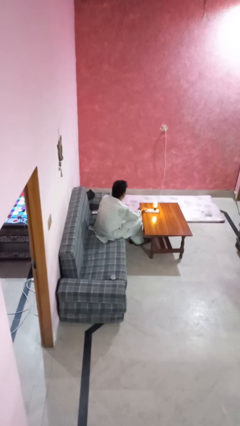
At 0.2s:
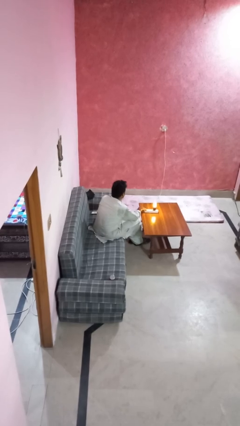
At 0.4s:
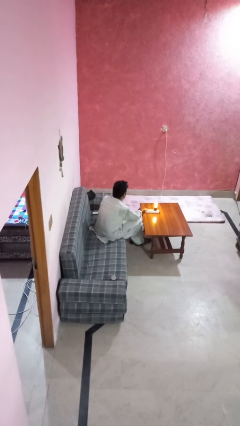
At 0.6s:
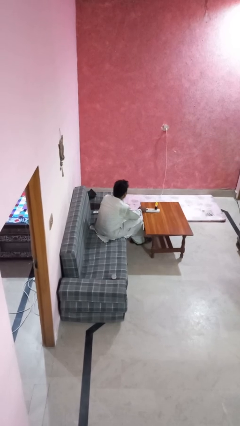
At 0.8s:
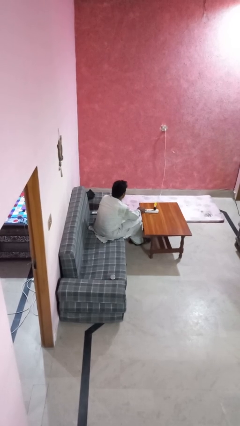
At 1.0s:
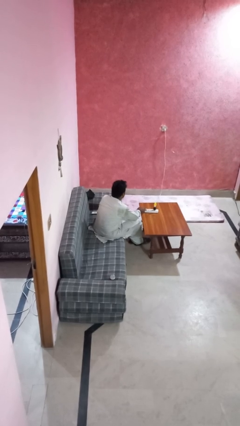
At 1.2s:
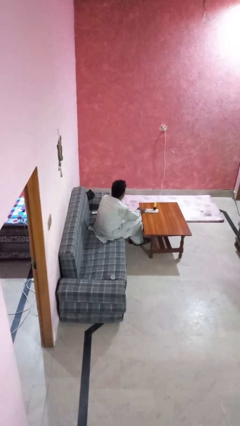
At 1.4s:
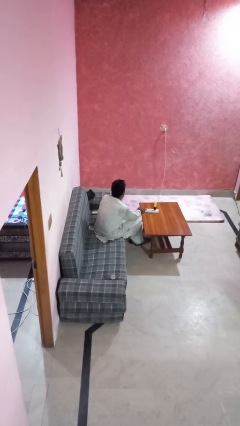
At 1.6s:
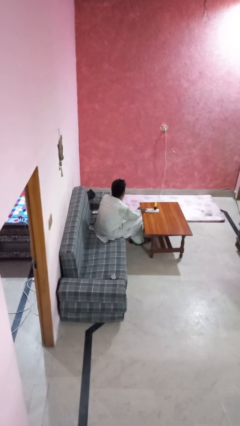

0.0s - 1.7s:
person turns off lamp

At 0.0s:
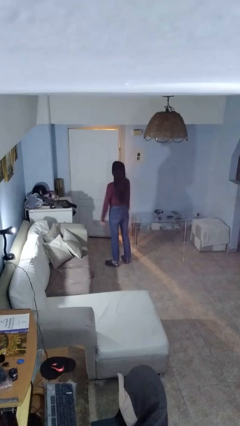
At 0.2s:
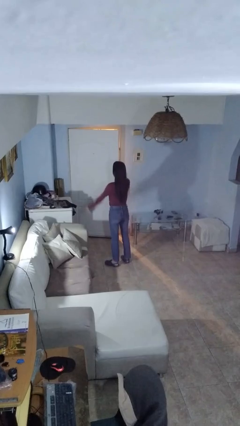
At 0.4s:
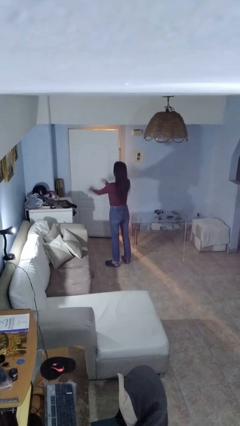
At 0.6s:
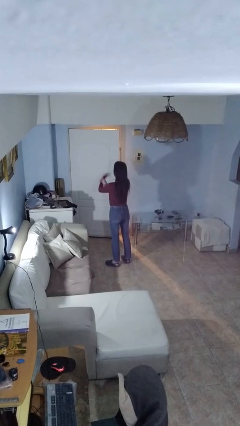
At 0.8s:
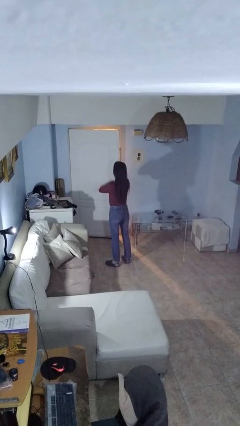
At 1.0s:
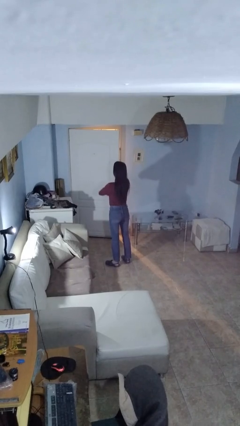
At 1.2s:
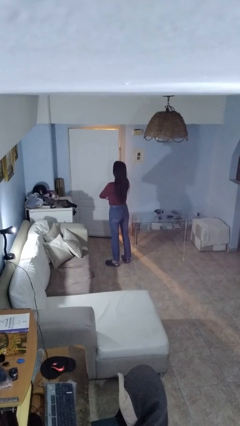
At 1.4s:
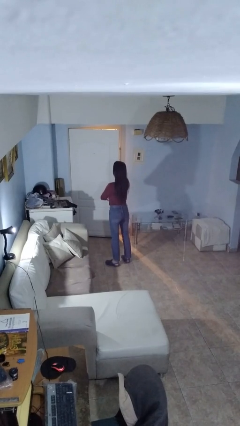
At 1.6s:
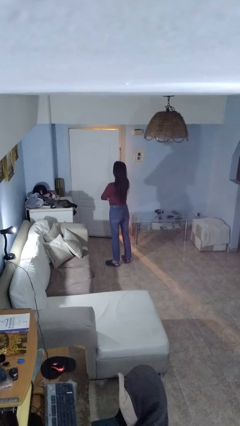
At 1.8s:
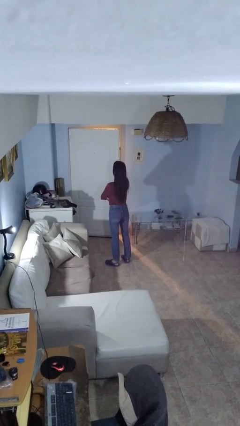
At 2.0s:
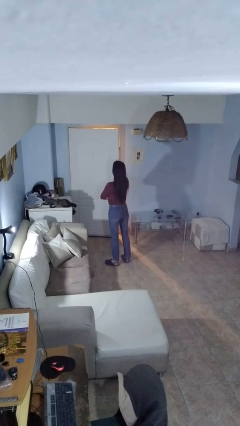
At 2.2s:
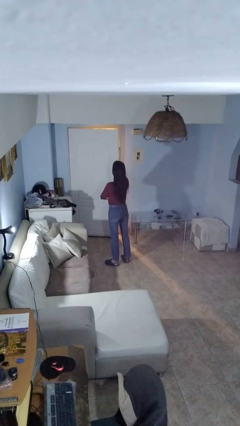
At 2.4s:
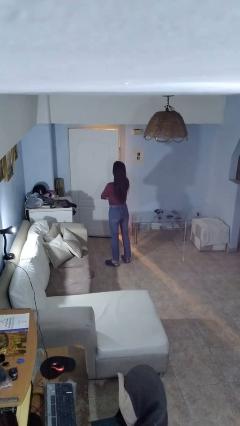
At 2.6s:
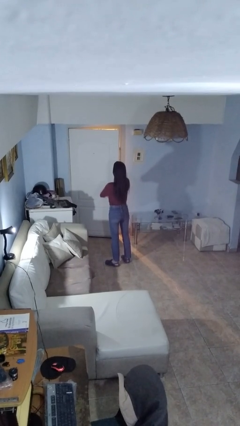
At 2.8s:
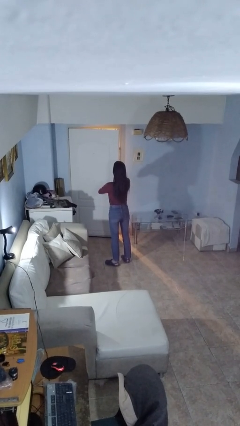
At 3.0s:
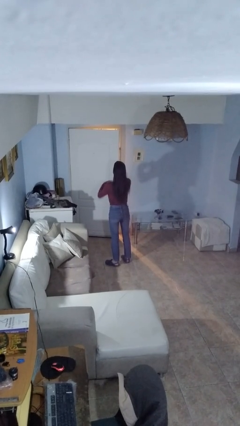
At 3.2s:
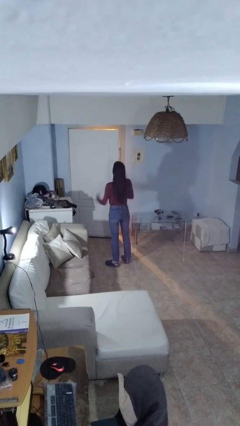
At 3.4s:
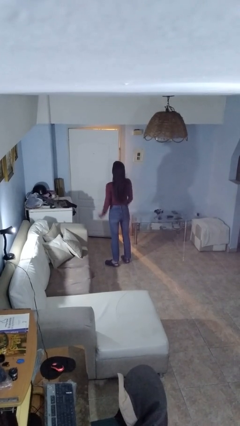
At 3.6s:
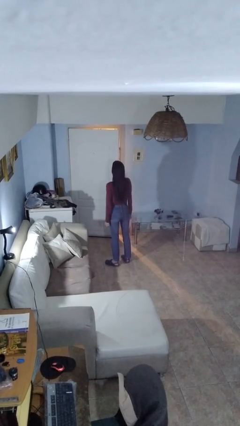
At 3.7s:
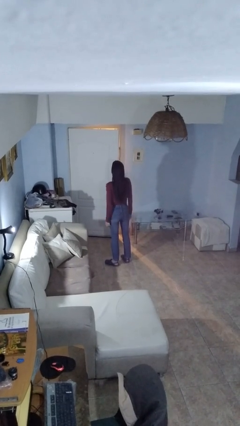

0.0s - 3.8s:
person crosses arms

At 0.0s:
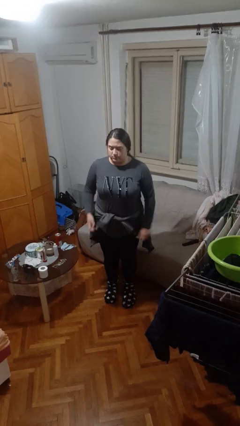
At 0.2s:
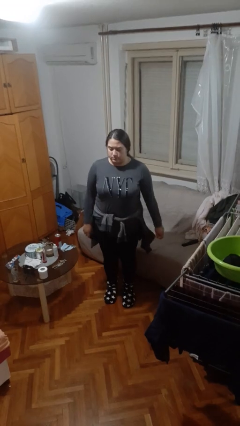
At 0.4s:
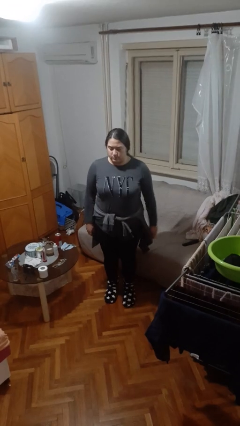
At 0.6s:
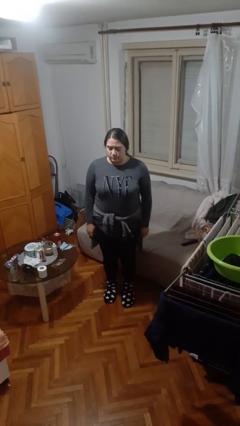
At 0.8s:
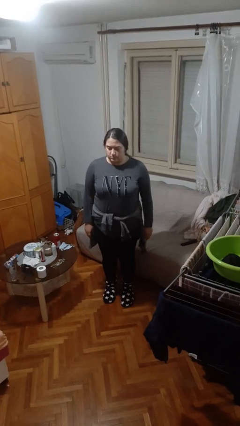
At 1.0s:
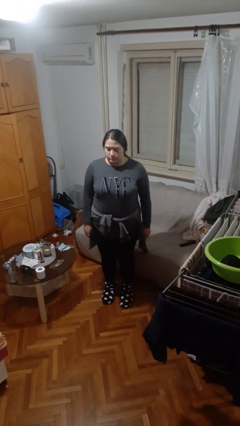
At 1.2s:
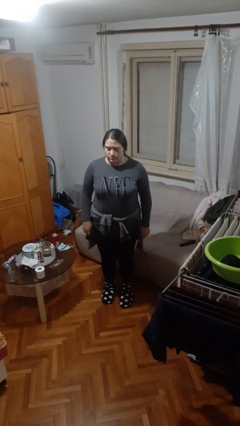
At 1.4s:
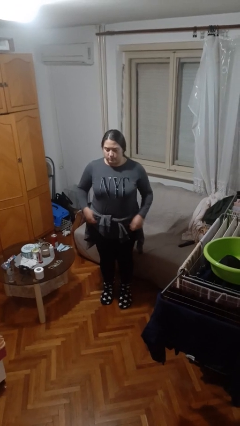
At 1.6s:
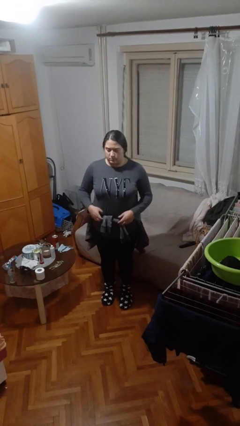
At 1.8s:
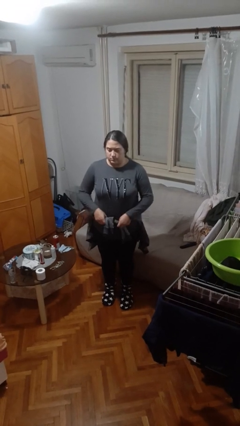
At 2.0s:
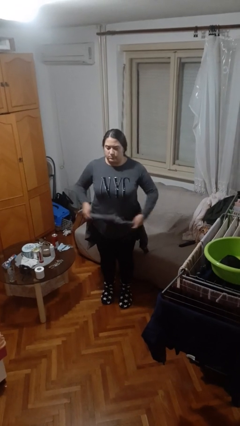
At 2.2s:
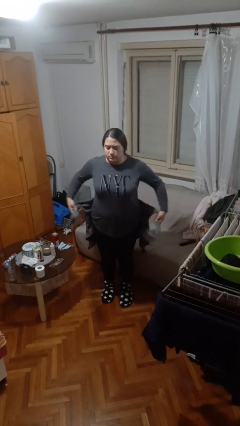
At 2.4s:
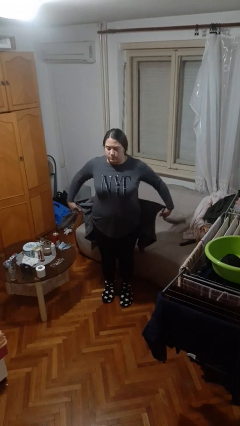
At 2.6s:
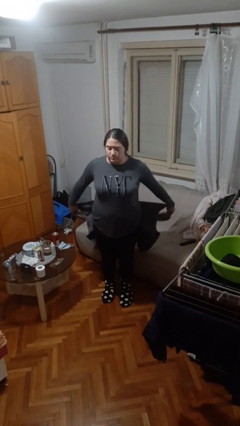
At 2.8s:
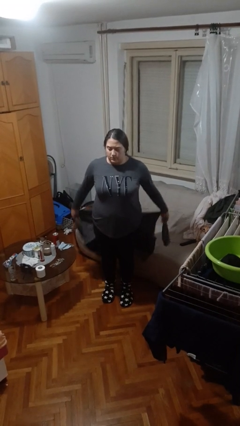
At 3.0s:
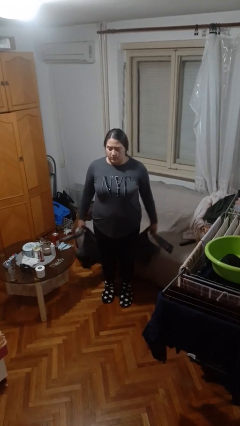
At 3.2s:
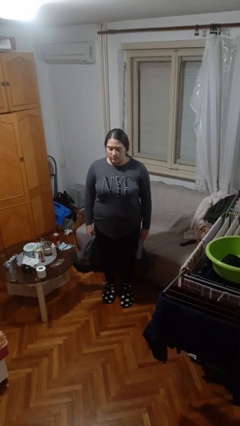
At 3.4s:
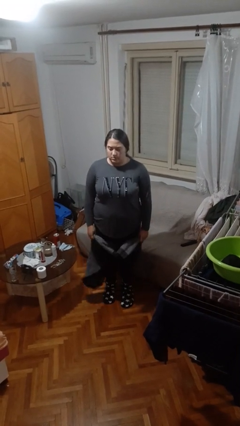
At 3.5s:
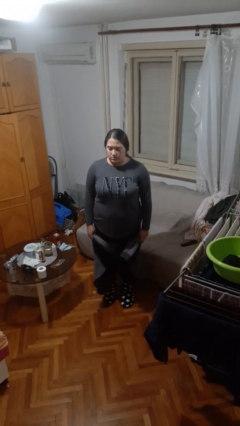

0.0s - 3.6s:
person unties jacket around waist

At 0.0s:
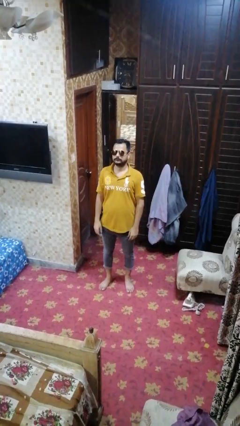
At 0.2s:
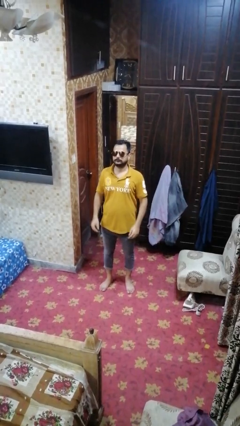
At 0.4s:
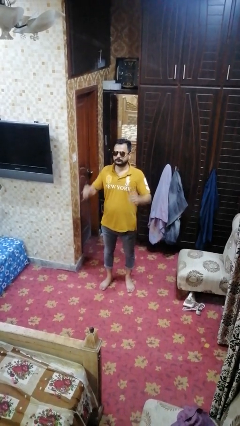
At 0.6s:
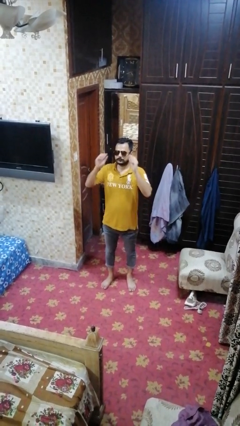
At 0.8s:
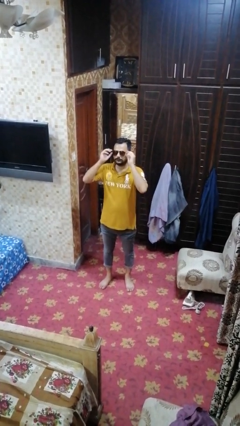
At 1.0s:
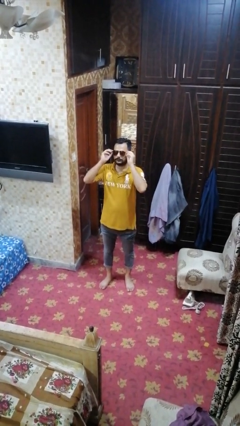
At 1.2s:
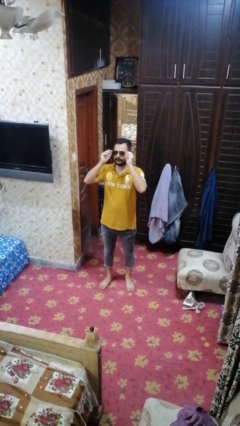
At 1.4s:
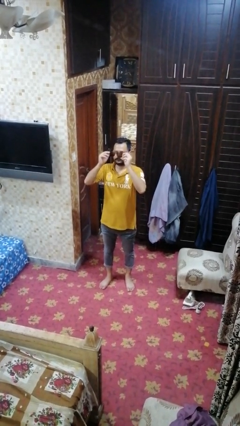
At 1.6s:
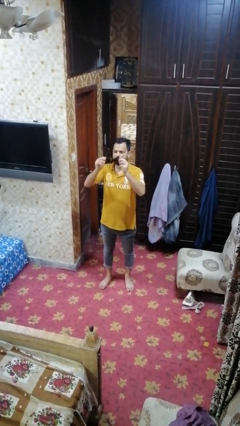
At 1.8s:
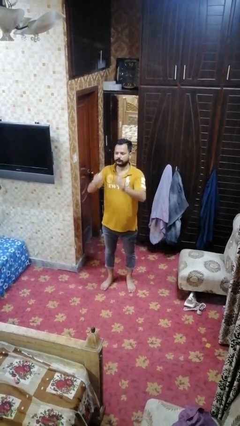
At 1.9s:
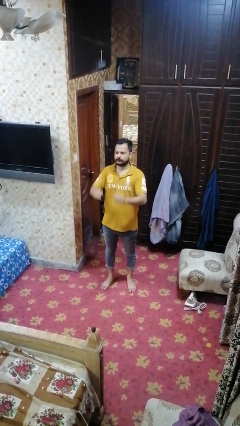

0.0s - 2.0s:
person takes off sunglasses

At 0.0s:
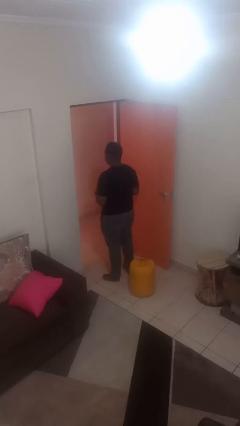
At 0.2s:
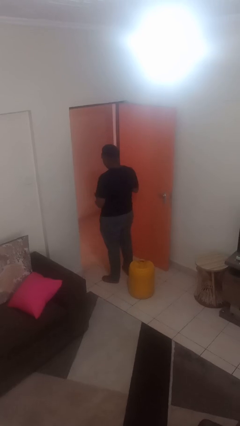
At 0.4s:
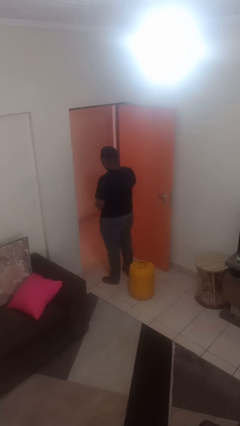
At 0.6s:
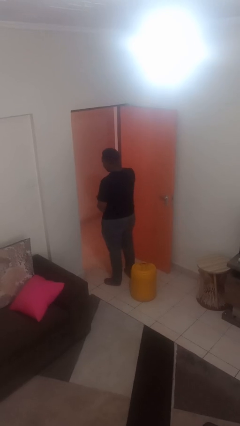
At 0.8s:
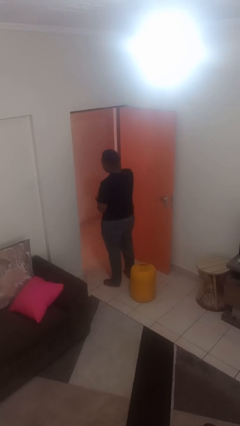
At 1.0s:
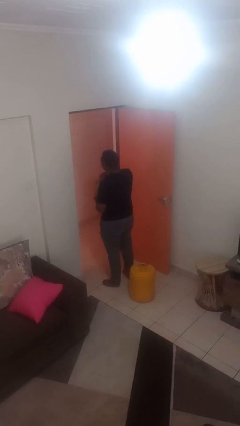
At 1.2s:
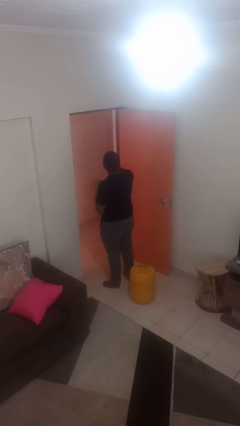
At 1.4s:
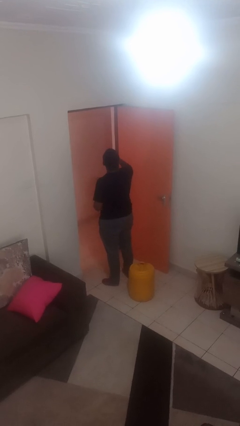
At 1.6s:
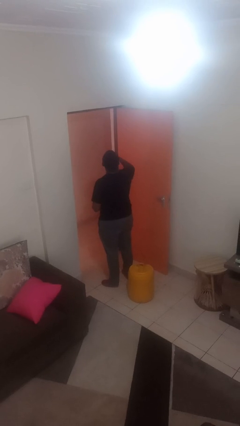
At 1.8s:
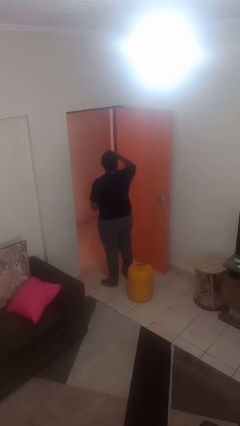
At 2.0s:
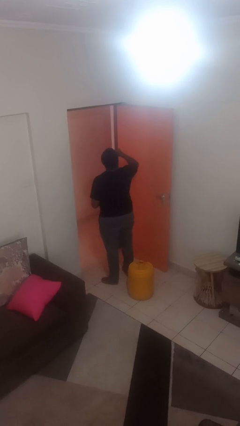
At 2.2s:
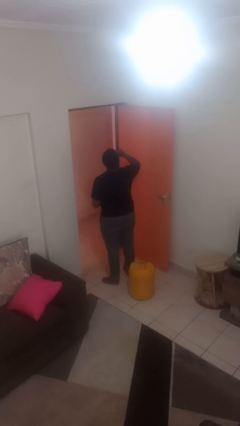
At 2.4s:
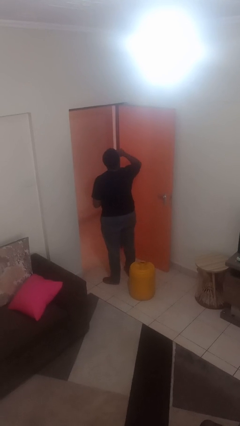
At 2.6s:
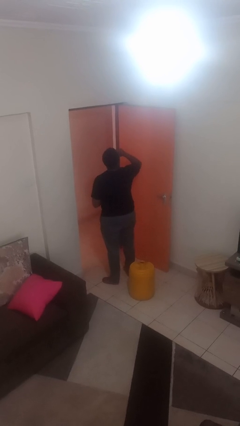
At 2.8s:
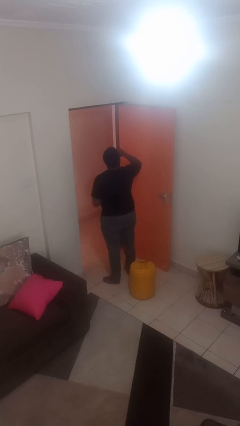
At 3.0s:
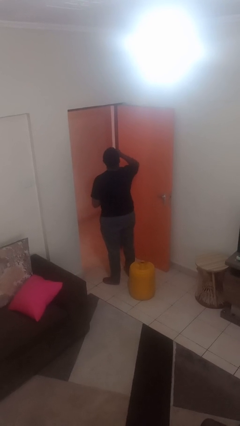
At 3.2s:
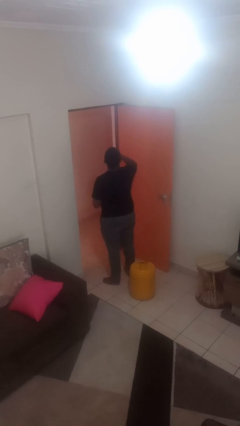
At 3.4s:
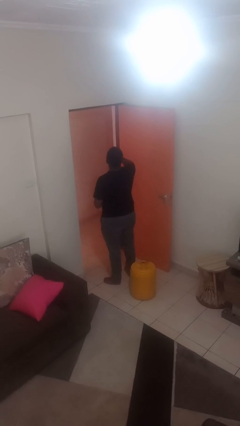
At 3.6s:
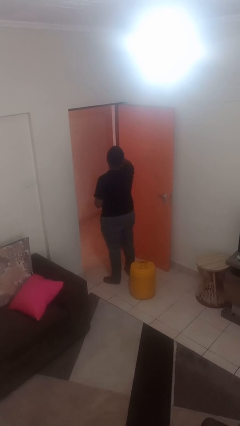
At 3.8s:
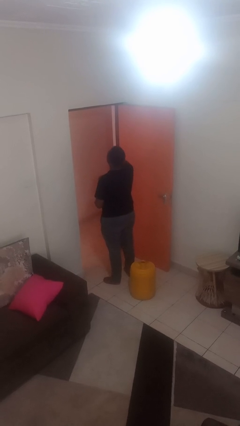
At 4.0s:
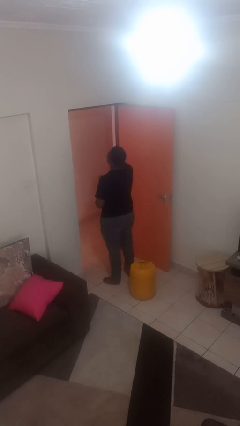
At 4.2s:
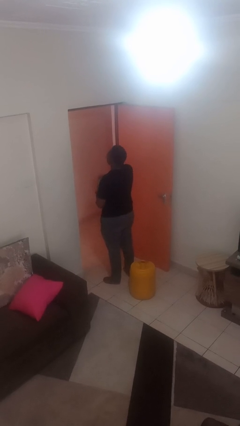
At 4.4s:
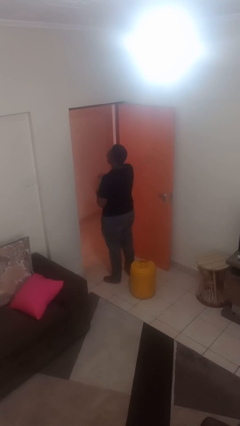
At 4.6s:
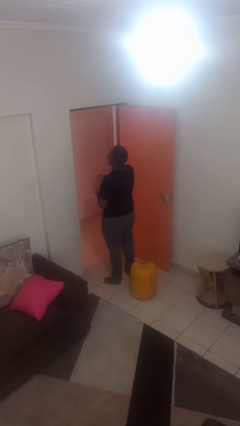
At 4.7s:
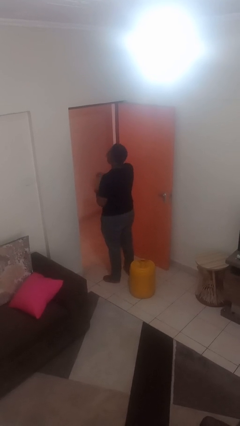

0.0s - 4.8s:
person eats snack from bag

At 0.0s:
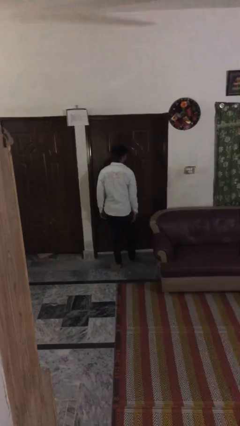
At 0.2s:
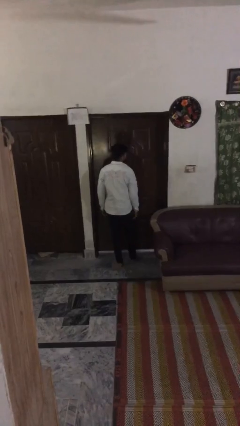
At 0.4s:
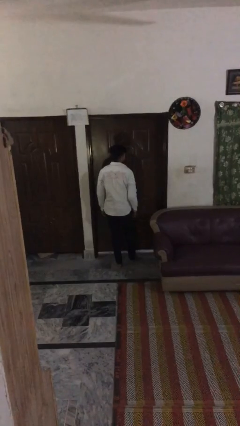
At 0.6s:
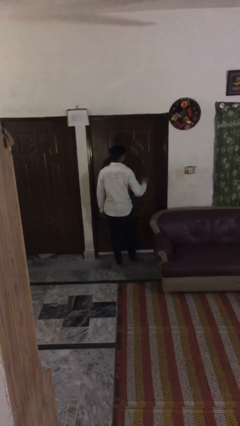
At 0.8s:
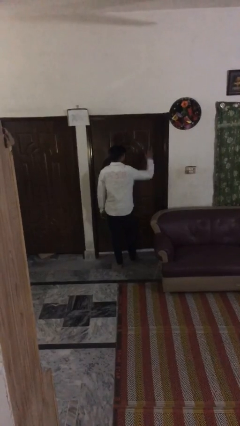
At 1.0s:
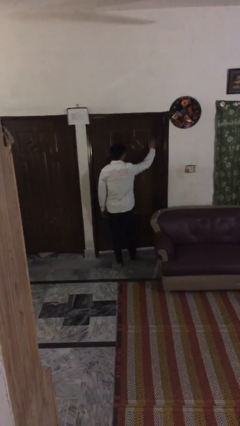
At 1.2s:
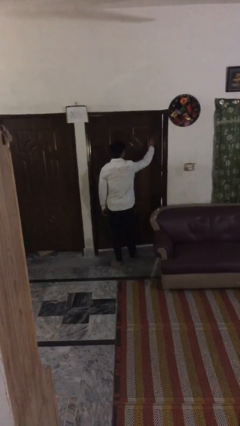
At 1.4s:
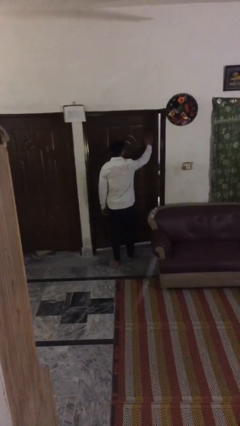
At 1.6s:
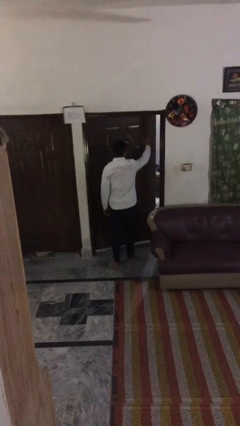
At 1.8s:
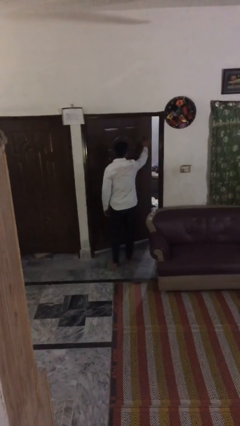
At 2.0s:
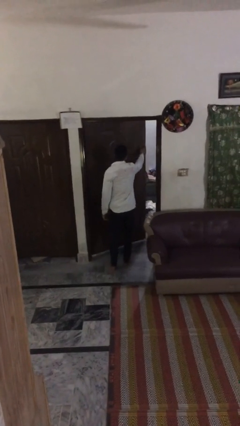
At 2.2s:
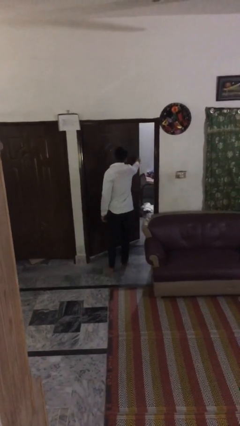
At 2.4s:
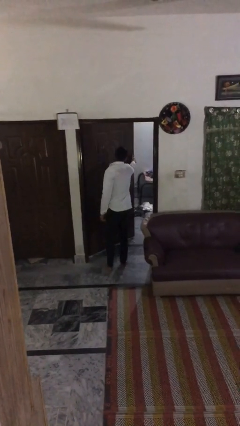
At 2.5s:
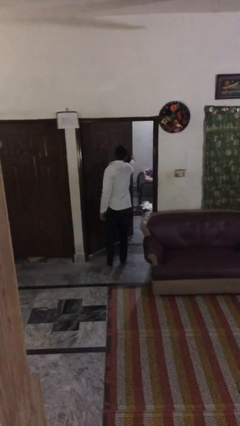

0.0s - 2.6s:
person opens facility door
